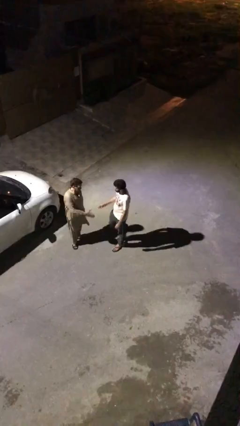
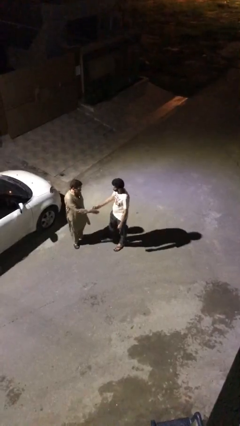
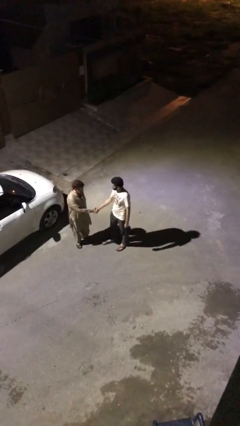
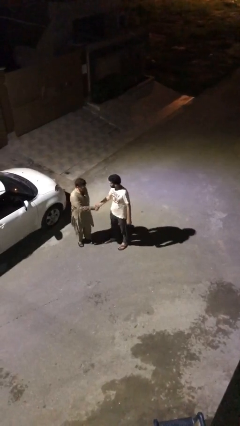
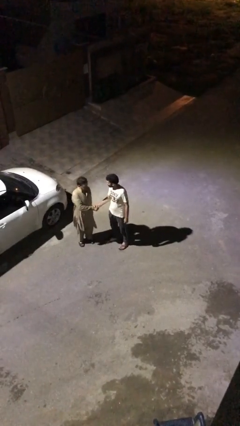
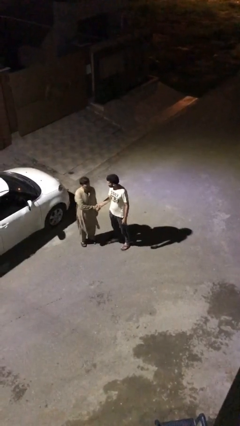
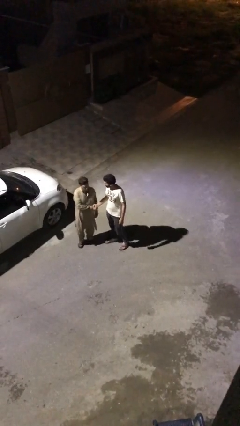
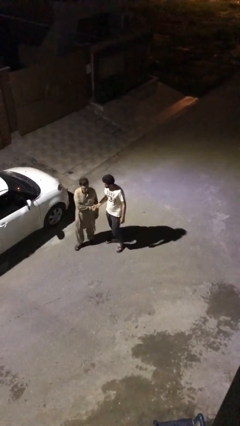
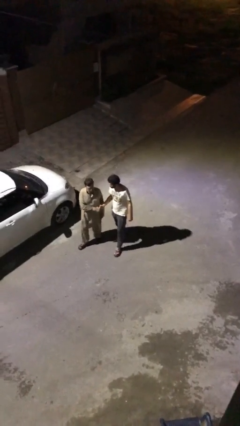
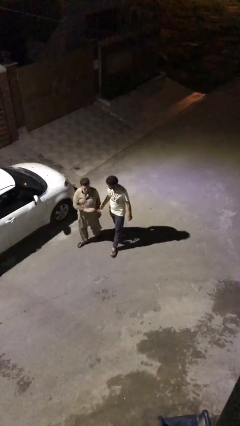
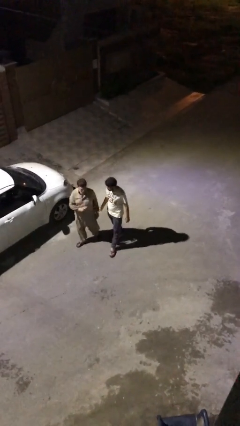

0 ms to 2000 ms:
person shakes hand

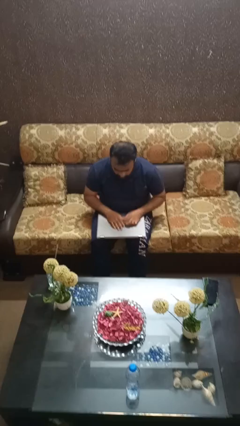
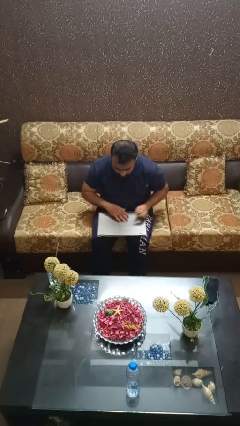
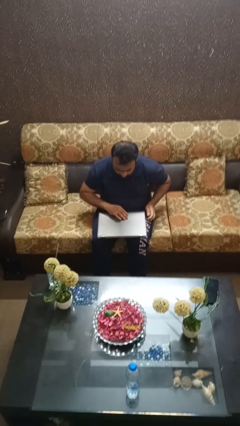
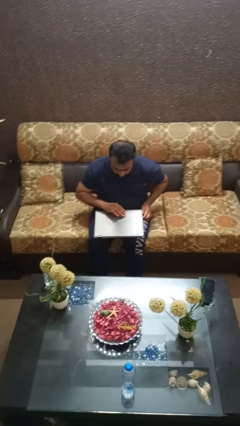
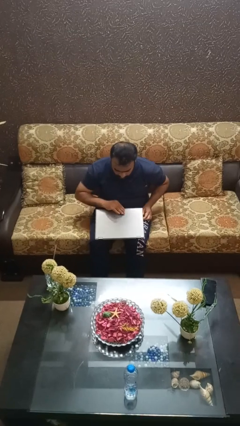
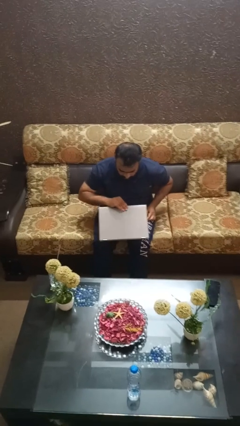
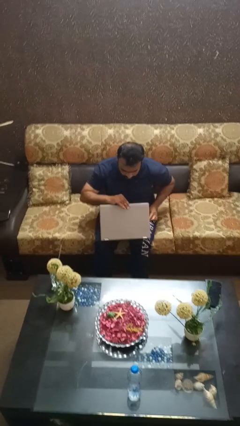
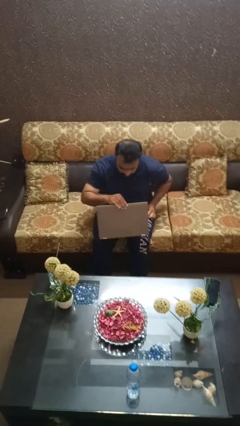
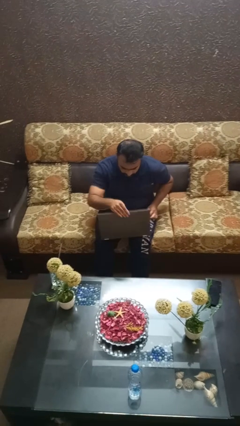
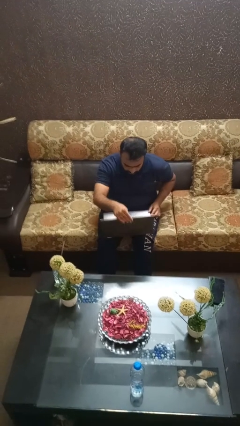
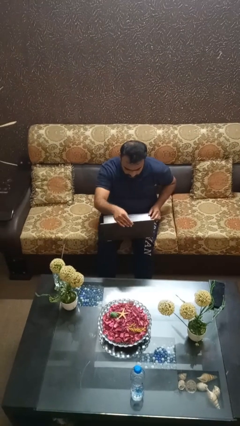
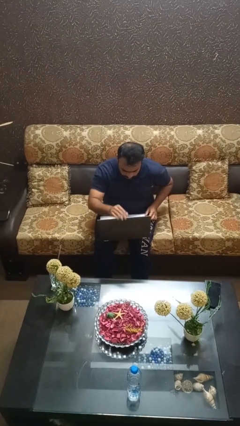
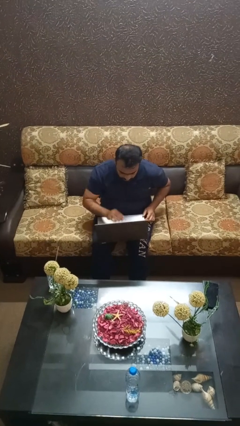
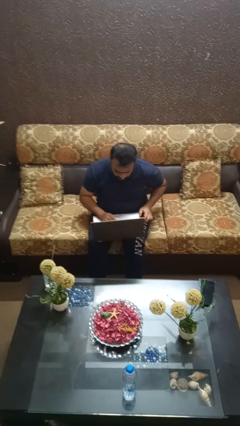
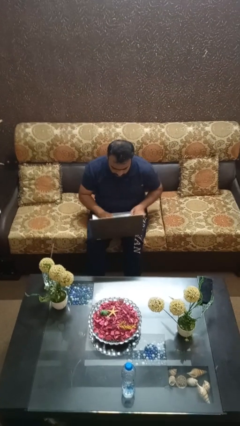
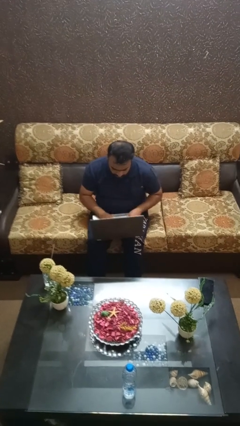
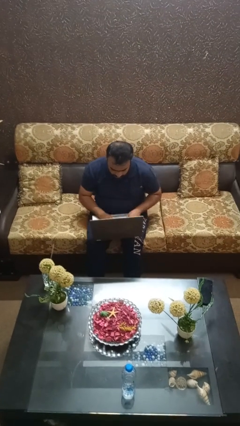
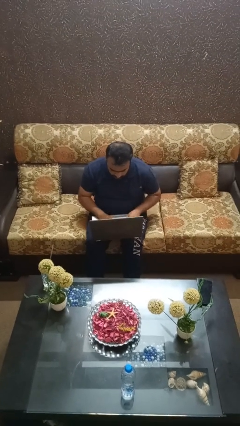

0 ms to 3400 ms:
person opens laptop

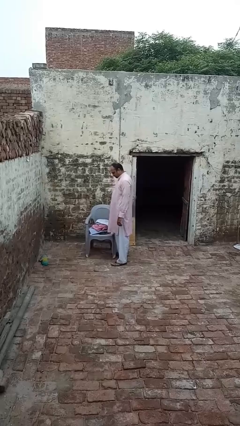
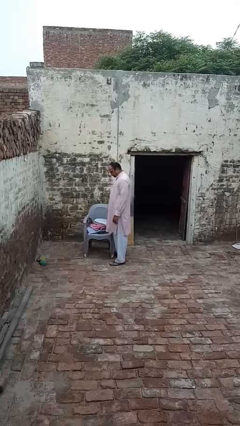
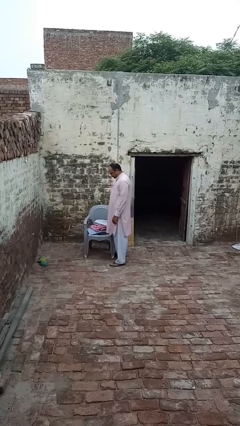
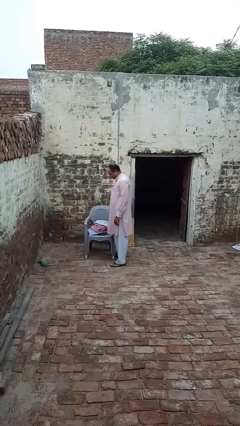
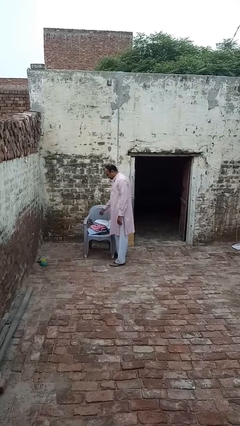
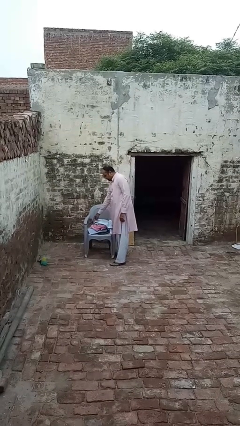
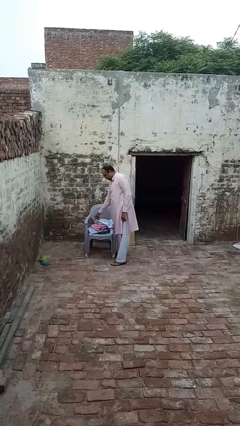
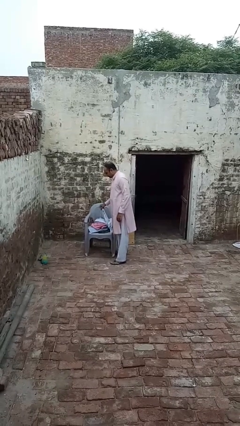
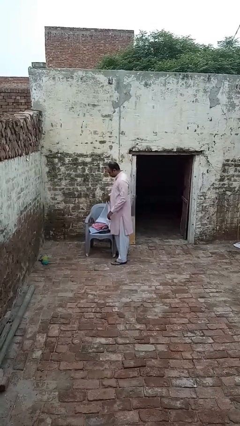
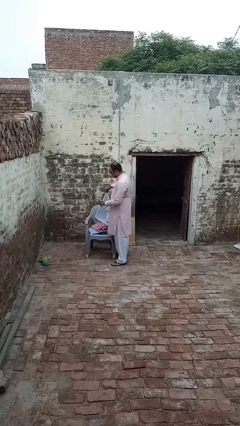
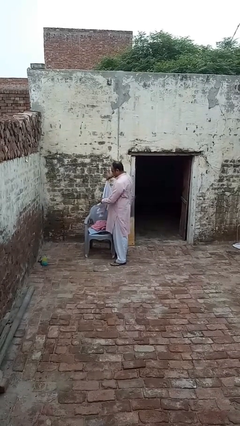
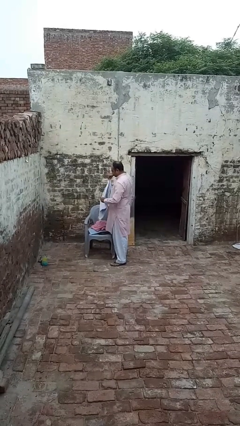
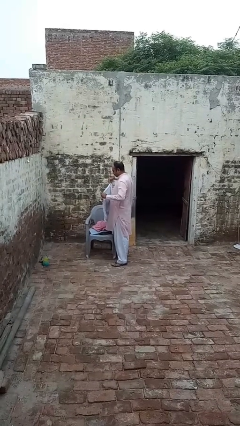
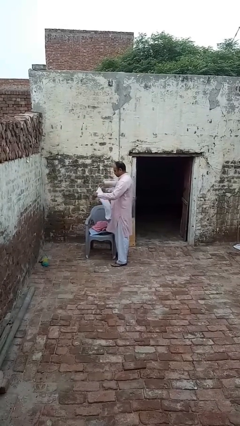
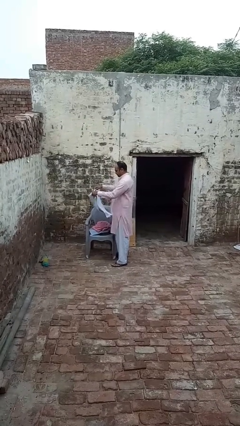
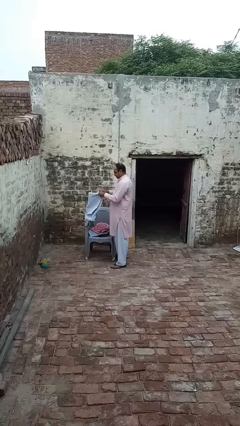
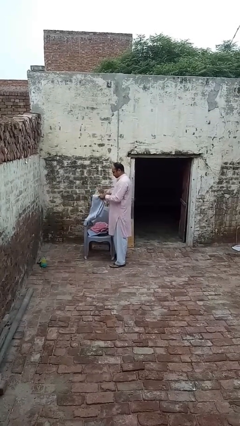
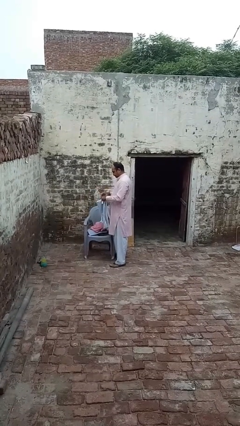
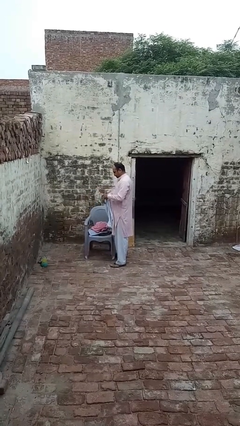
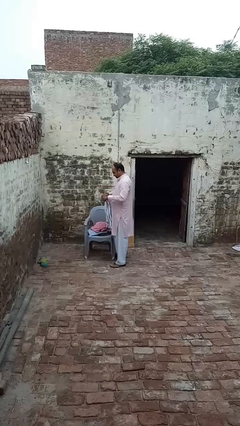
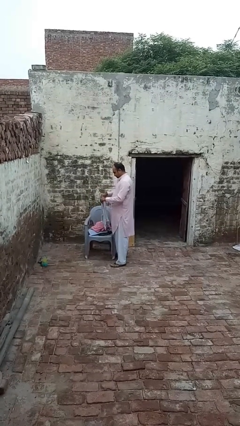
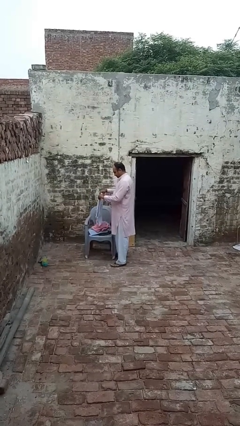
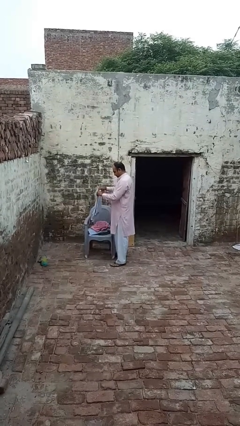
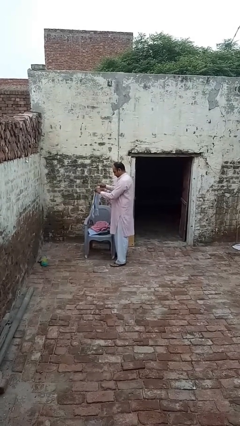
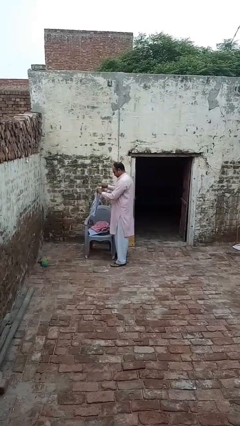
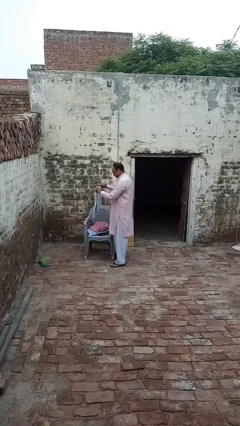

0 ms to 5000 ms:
person folds towel

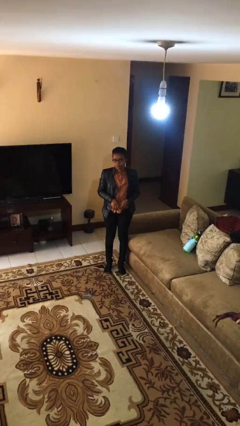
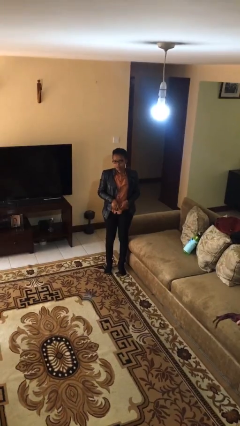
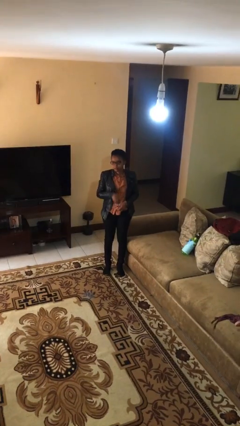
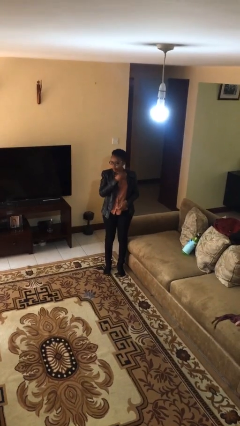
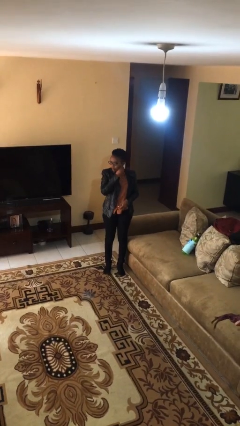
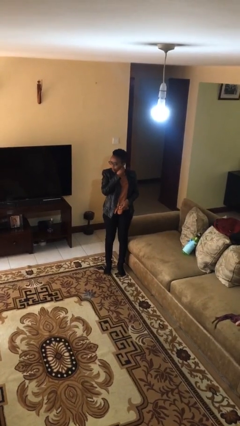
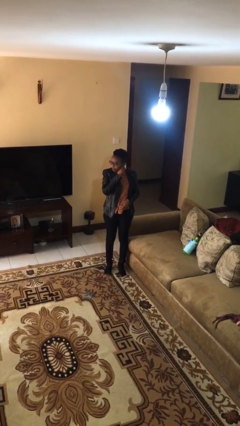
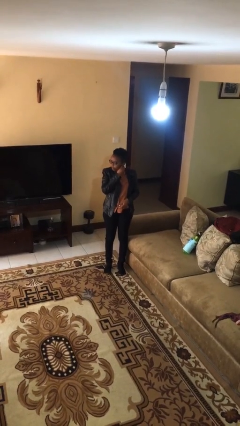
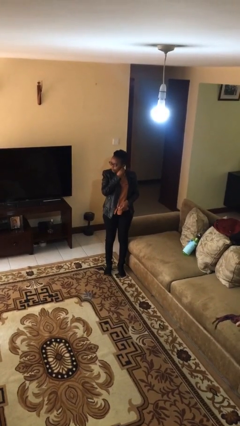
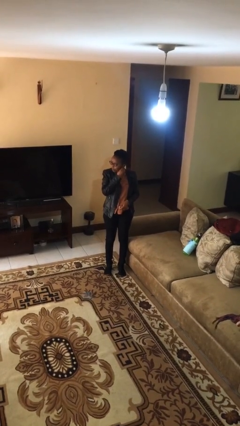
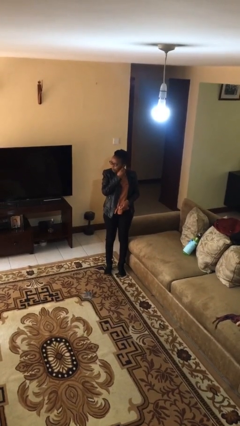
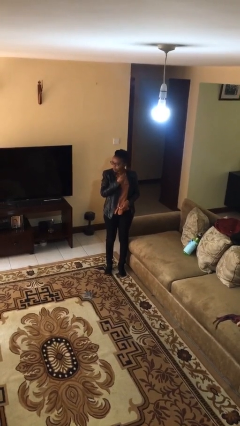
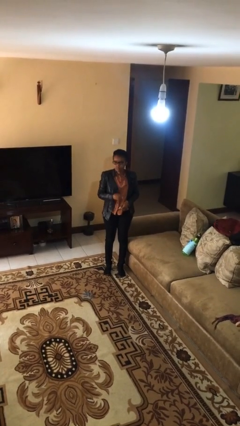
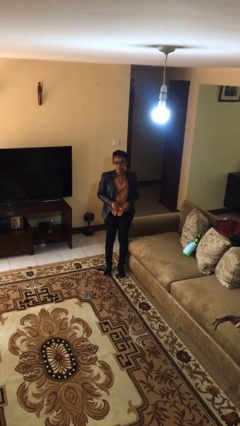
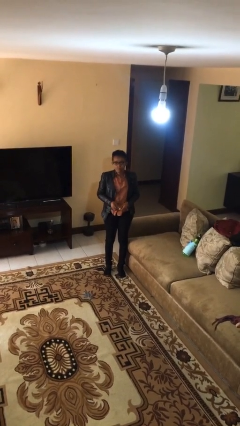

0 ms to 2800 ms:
person takes off earrings

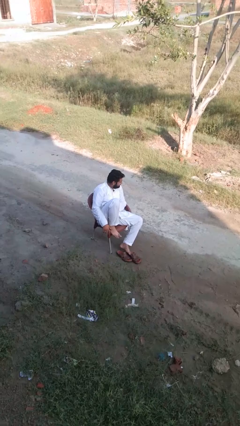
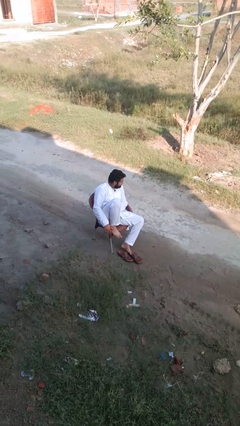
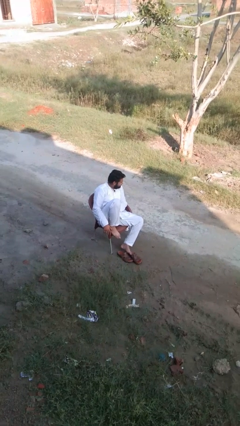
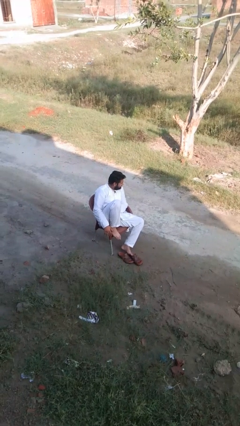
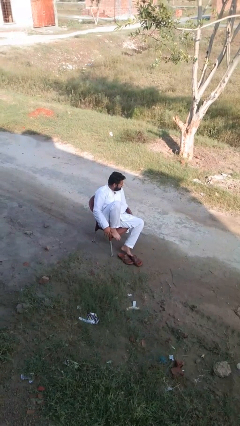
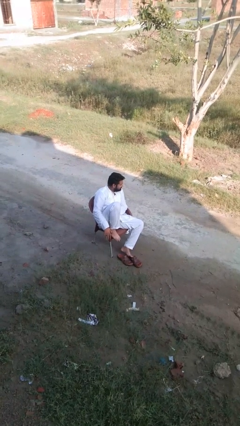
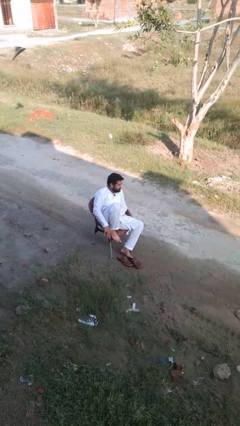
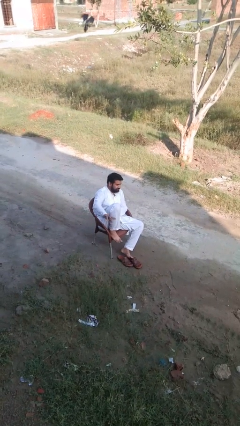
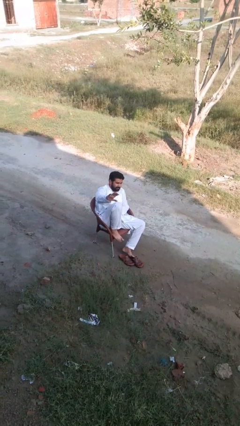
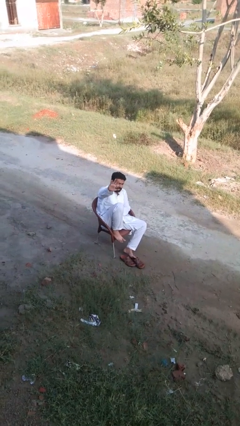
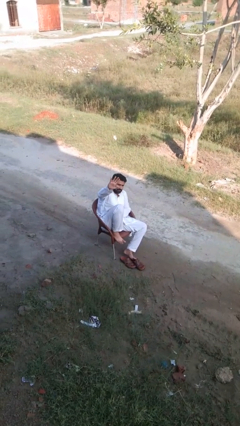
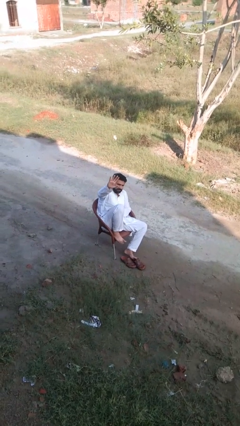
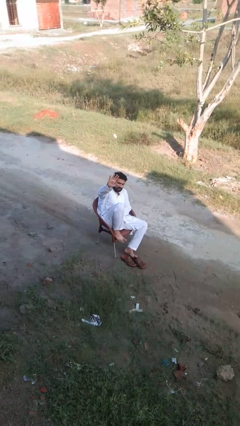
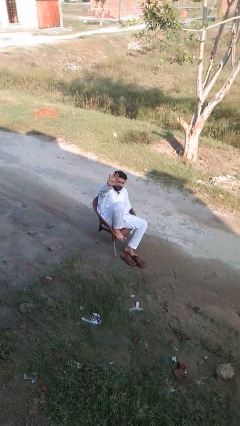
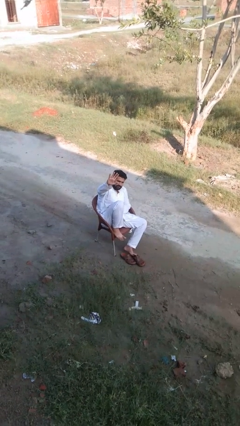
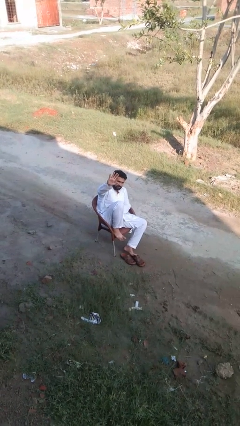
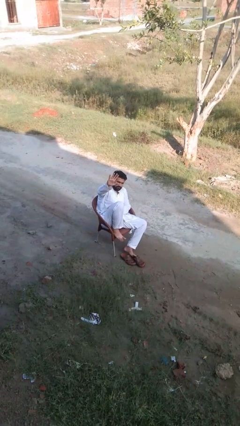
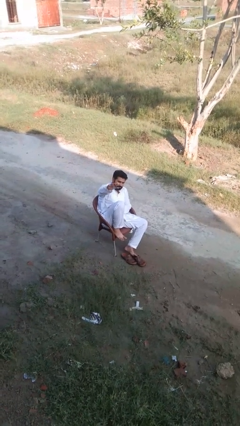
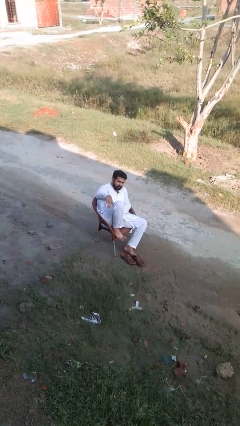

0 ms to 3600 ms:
person gestures number five

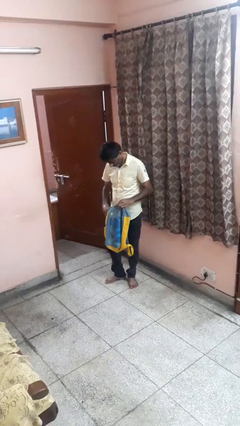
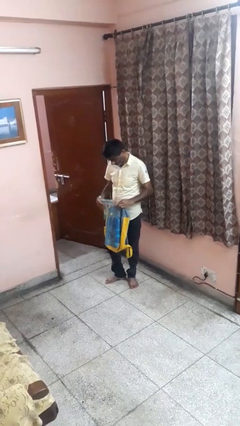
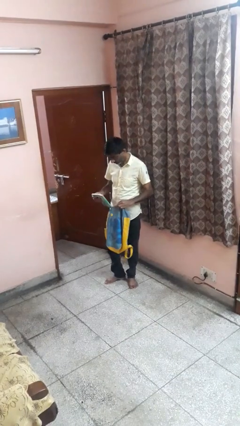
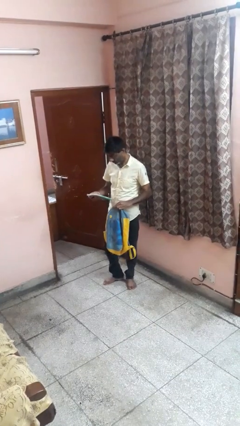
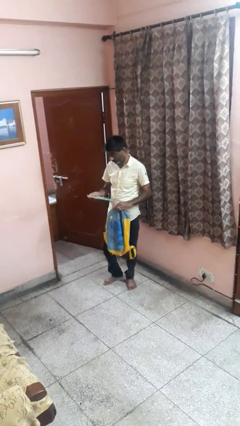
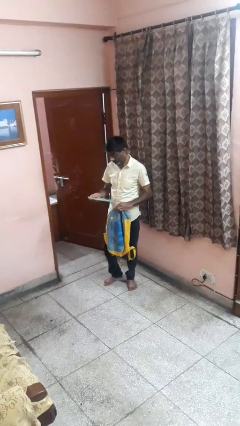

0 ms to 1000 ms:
person takes object from backpack
